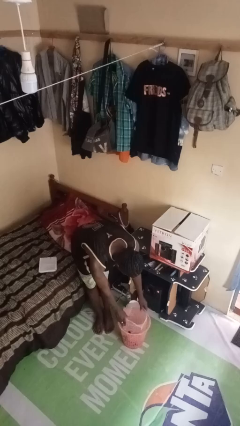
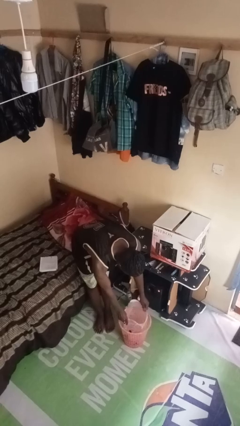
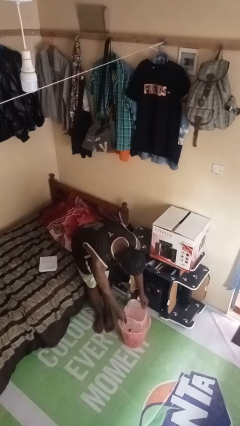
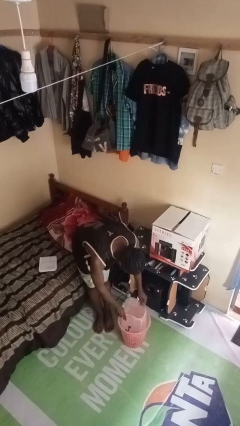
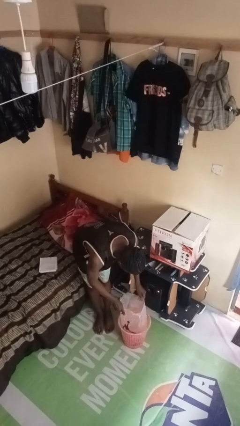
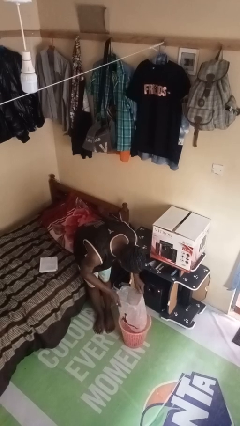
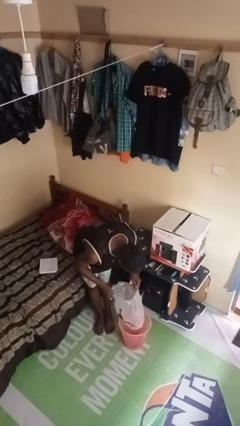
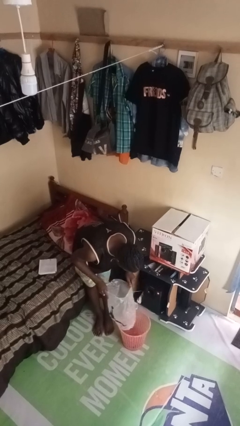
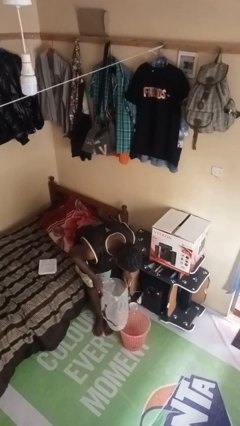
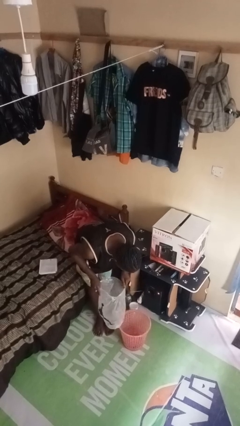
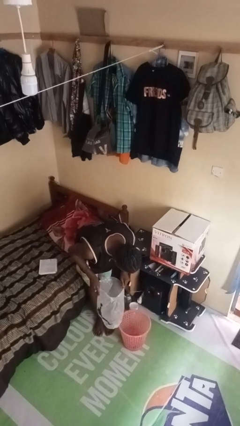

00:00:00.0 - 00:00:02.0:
person removes trashbag from trashcan

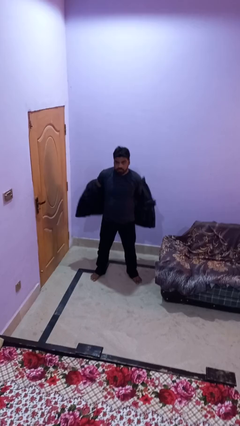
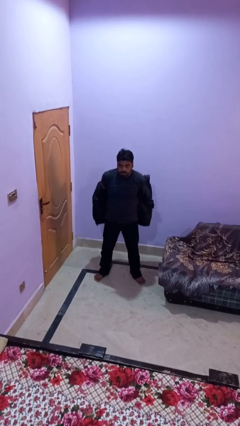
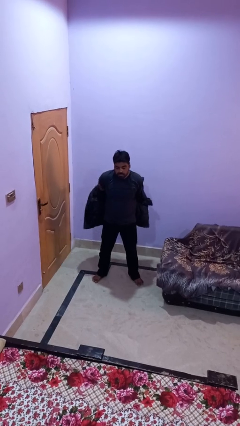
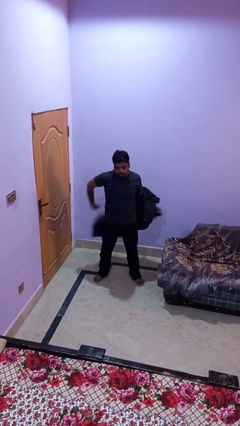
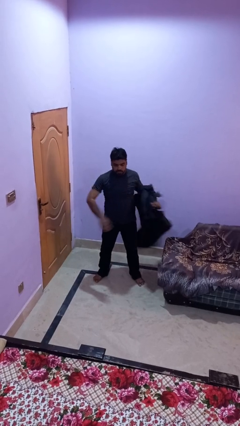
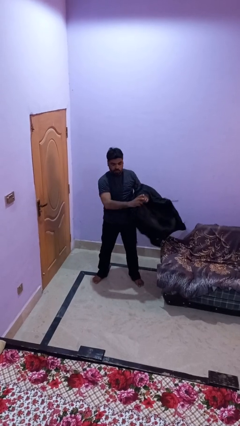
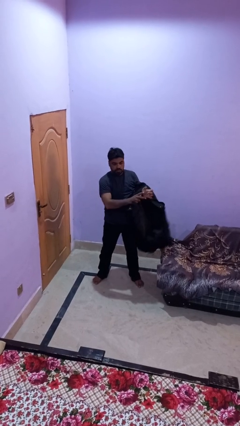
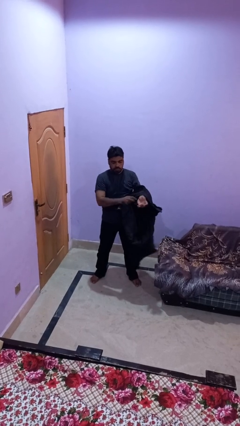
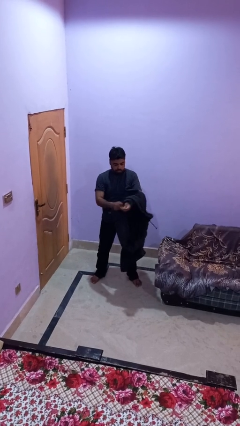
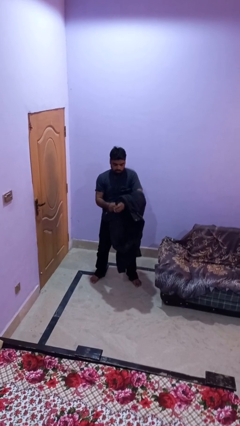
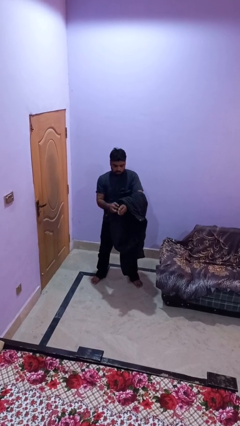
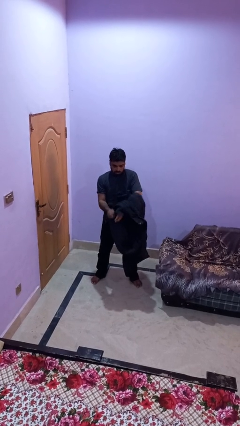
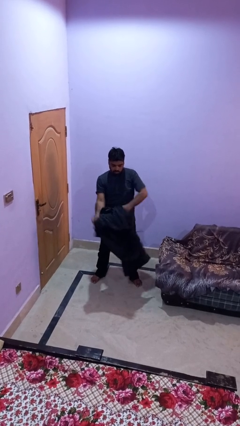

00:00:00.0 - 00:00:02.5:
person takes off jacket

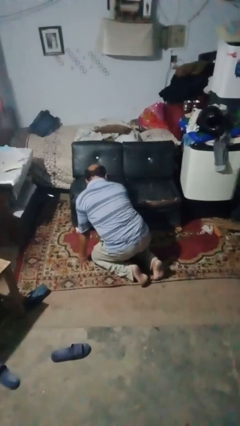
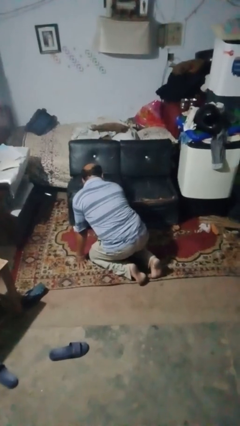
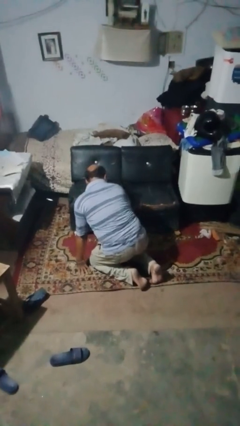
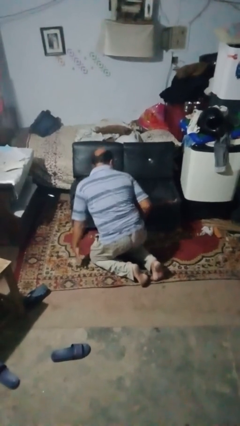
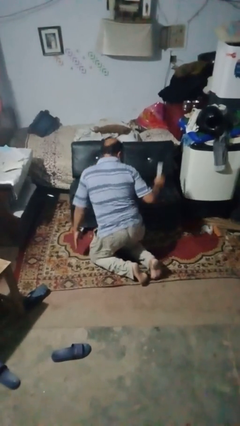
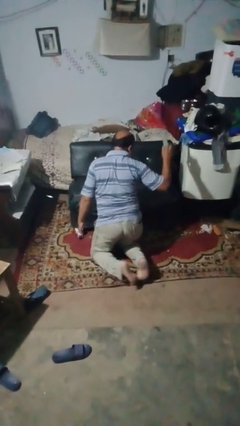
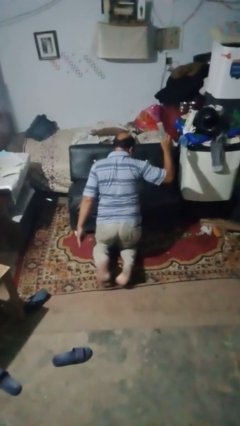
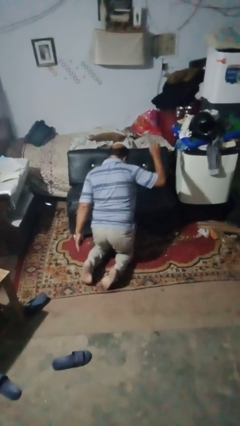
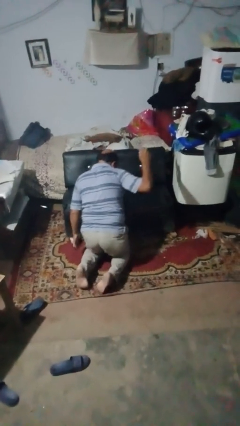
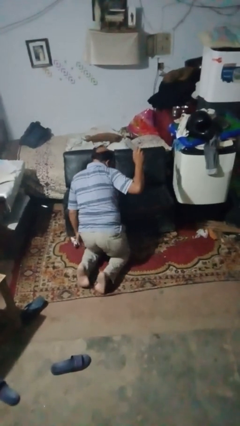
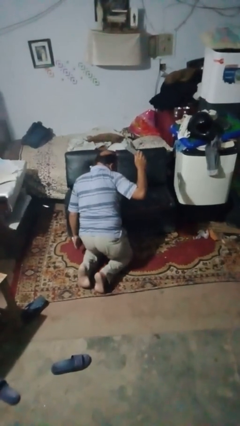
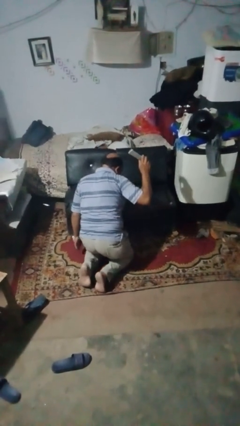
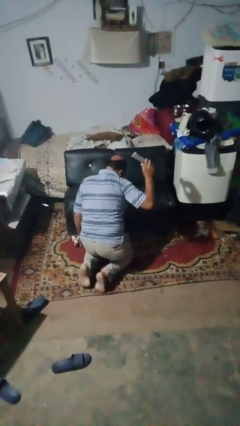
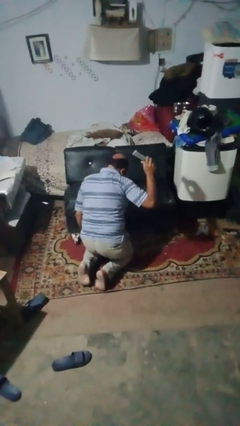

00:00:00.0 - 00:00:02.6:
person searches under couch

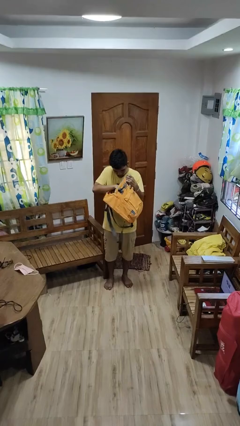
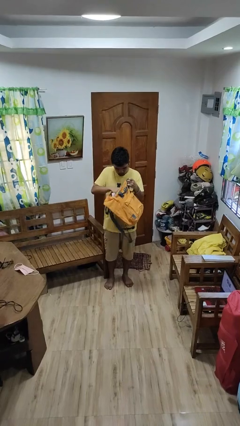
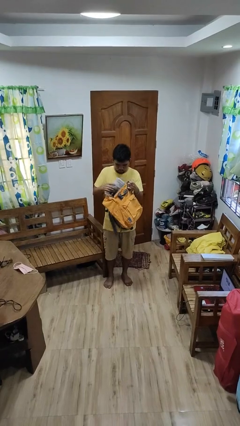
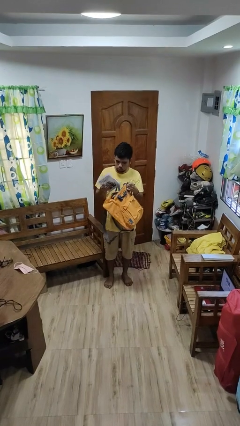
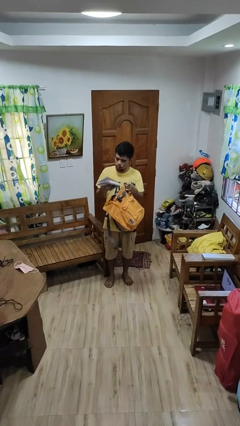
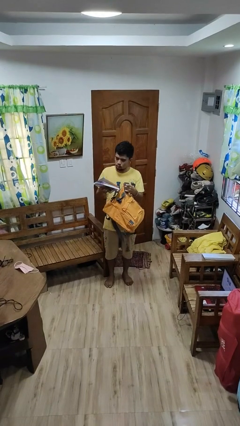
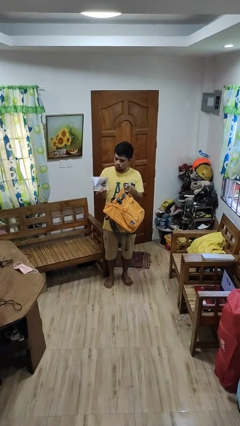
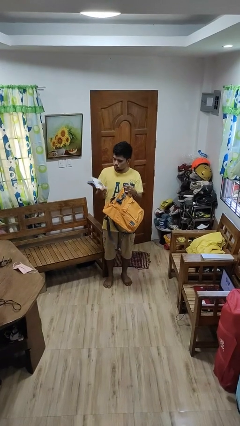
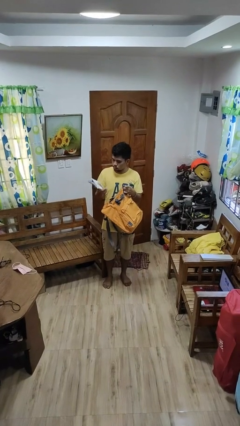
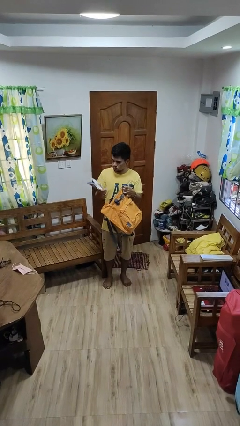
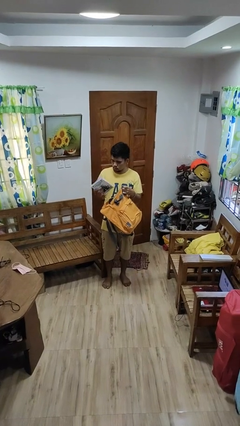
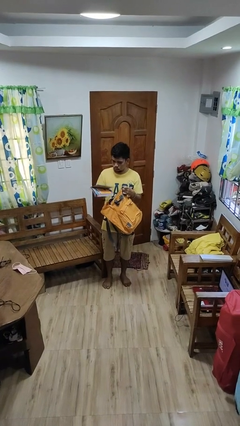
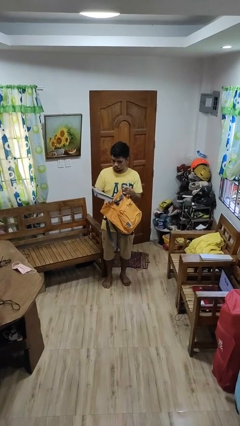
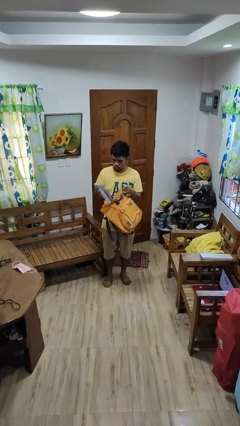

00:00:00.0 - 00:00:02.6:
person takes object from backpack

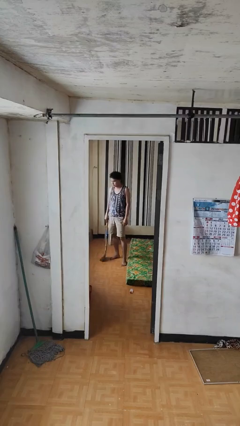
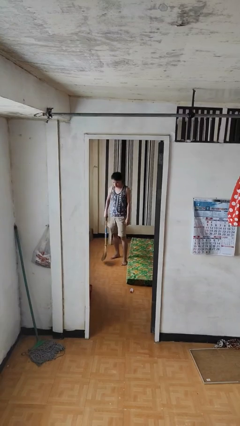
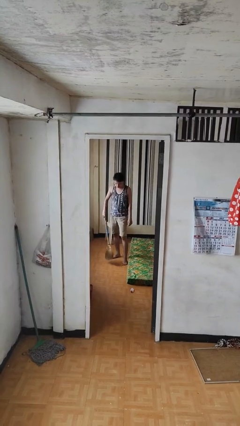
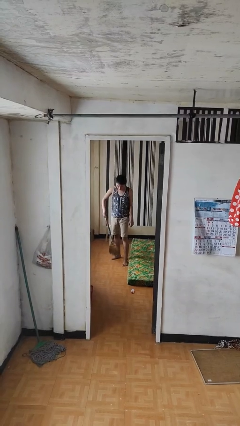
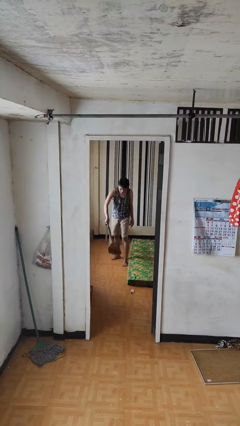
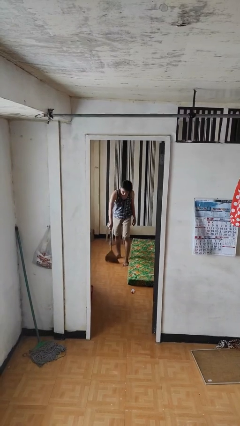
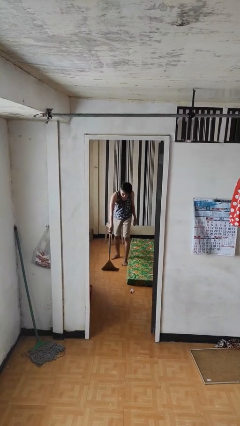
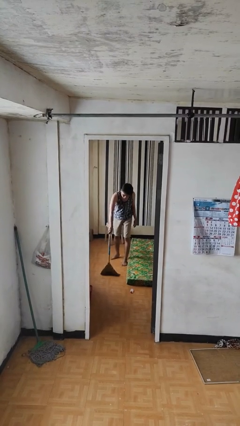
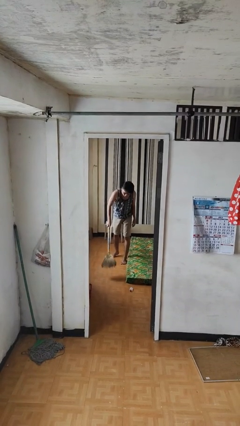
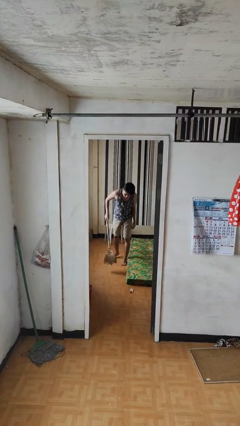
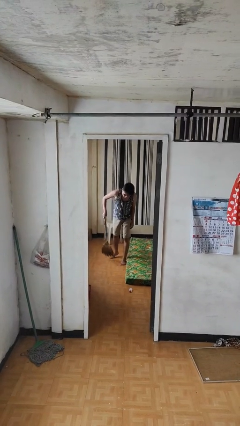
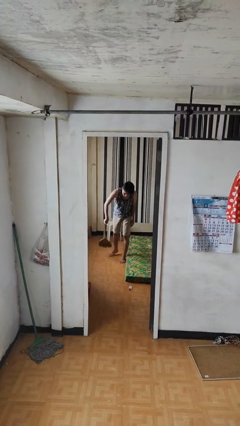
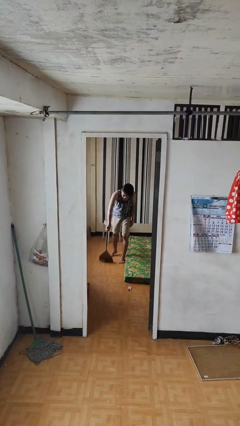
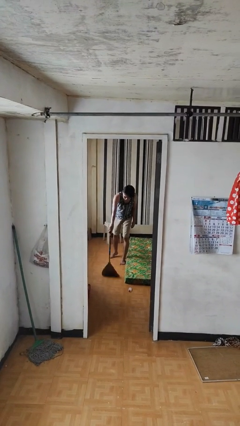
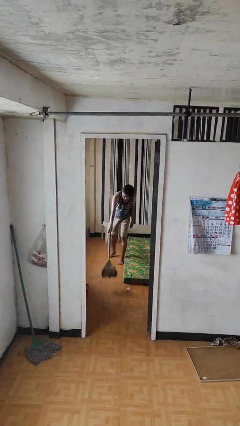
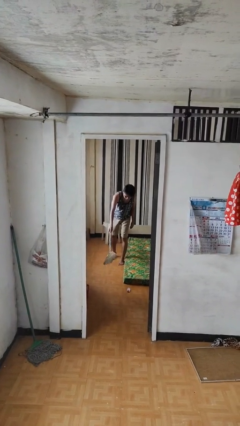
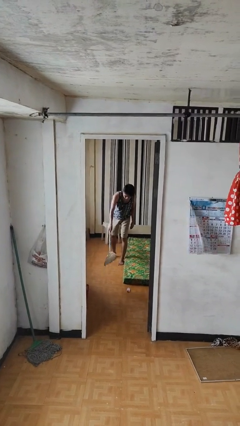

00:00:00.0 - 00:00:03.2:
person sweeps floor

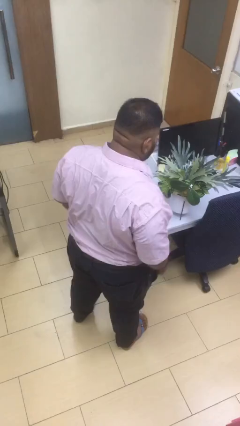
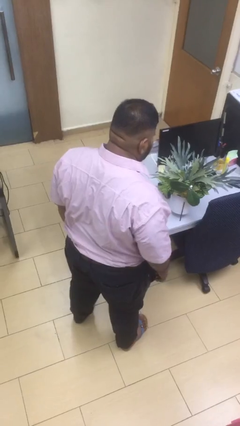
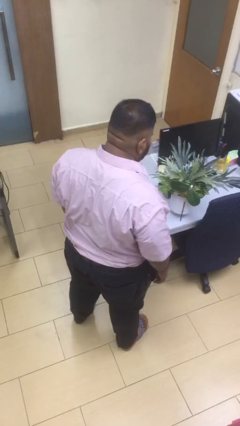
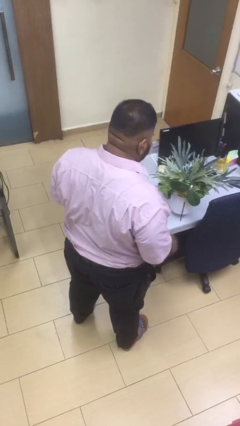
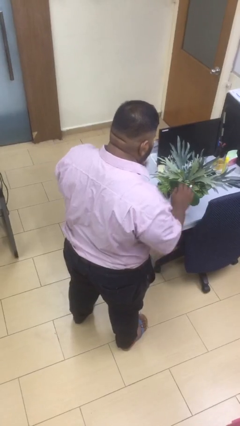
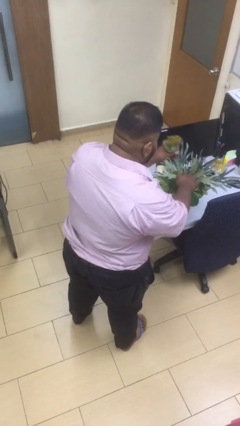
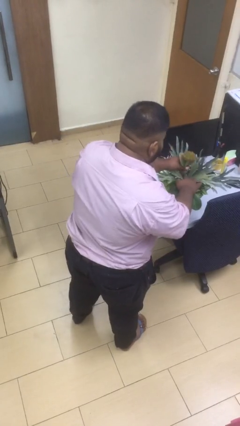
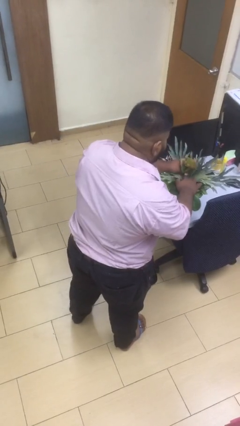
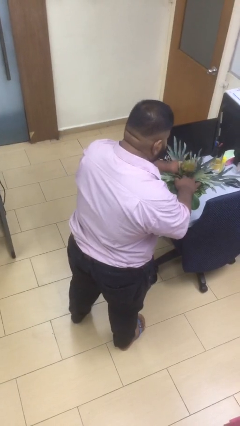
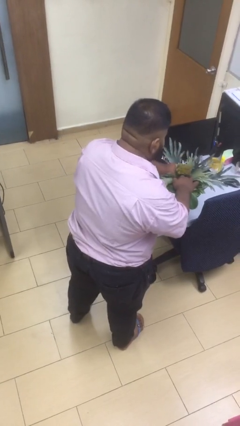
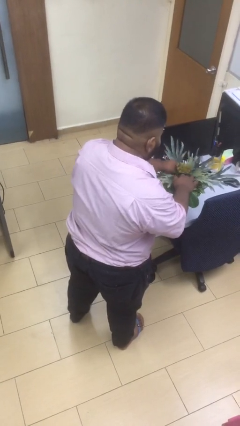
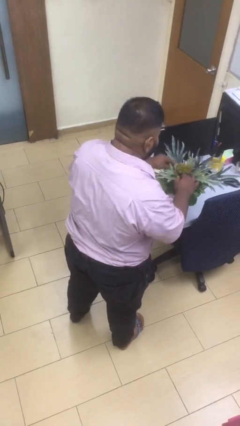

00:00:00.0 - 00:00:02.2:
person arranges flowers in vase

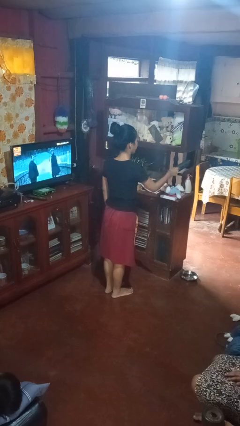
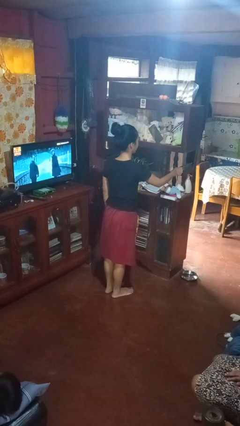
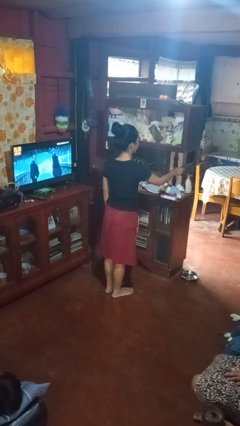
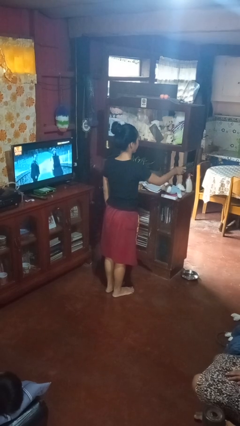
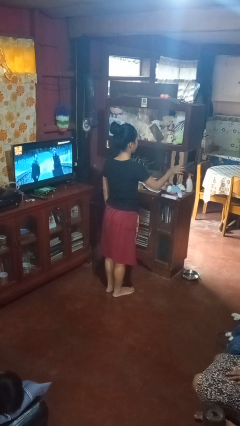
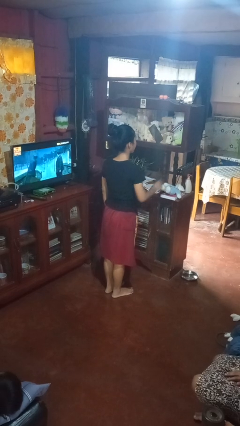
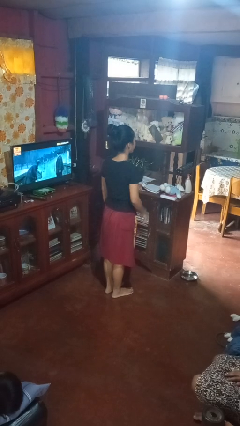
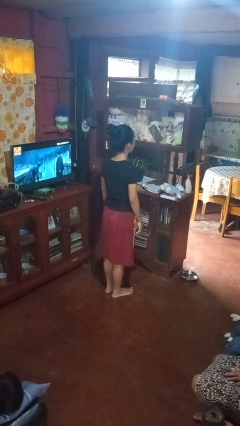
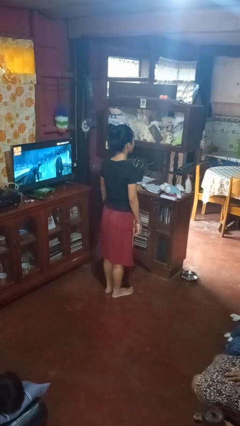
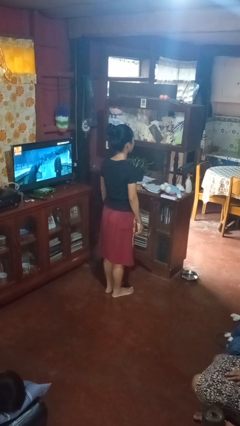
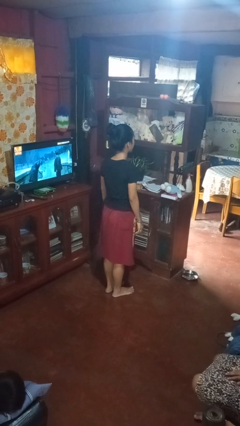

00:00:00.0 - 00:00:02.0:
person puts down object on shelf
